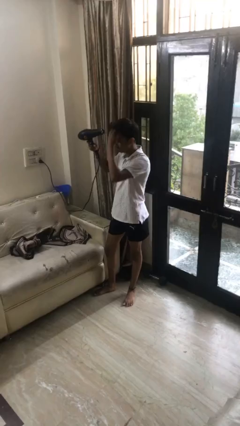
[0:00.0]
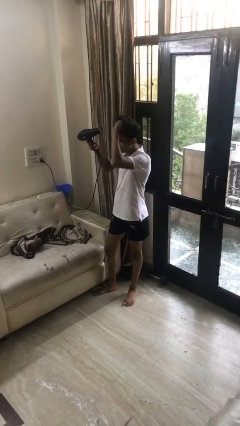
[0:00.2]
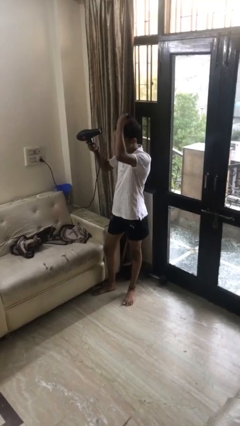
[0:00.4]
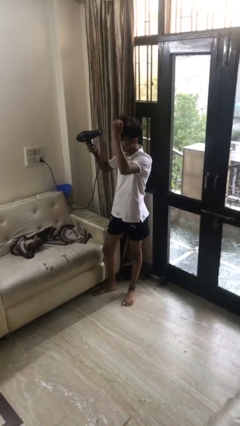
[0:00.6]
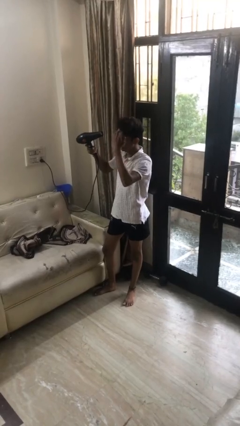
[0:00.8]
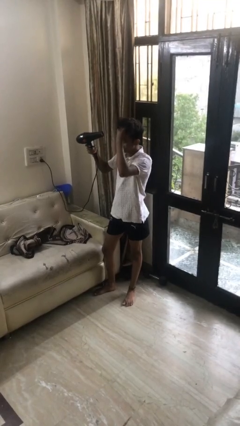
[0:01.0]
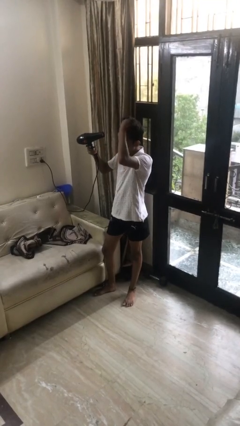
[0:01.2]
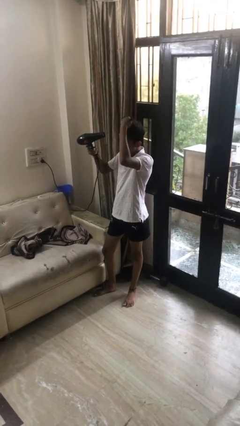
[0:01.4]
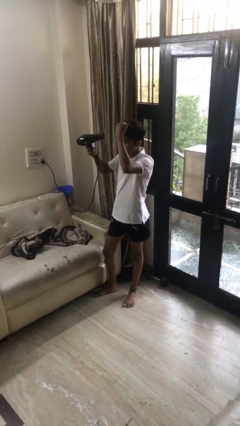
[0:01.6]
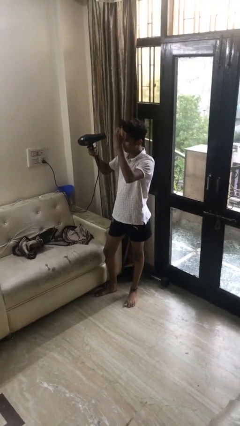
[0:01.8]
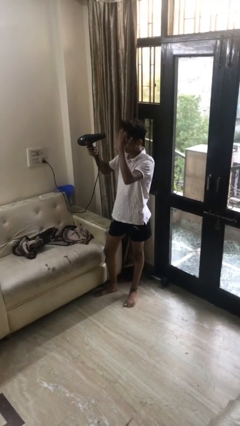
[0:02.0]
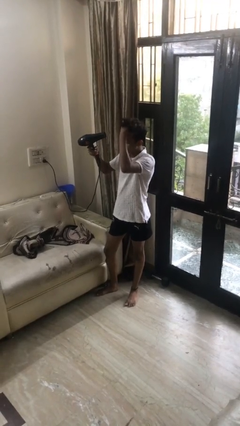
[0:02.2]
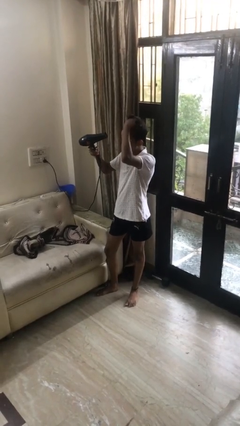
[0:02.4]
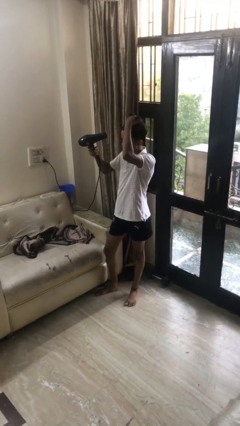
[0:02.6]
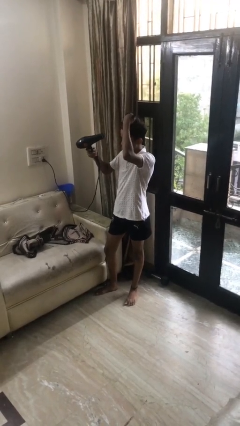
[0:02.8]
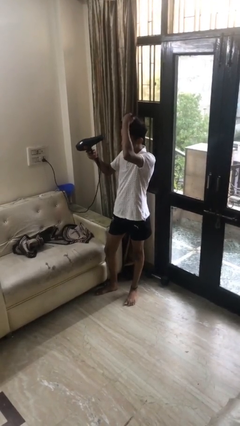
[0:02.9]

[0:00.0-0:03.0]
person dries hair with hairdryer

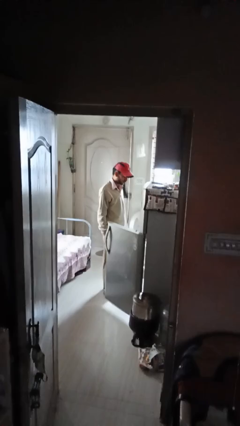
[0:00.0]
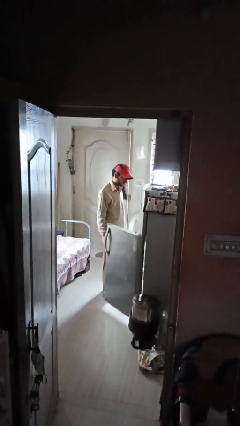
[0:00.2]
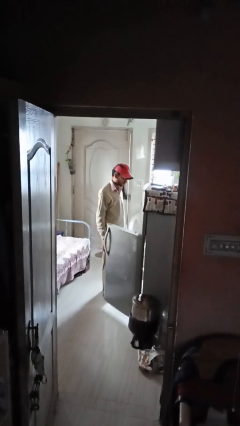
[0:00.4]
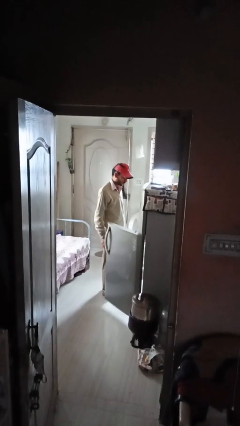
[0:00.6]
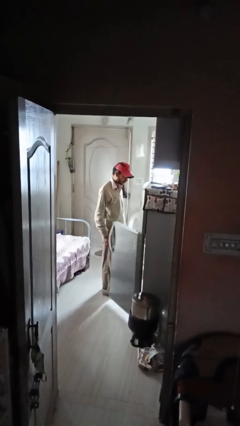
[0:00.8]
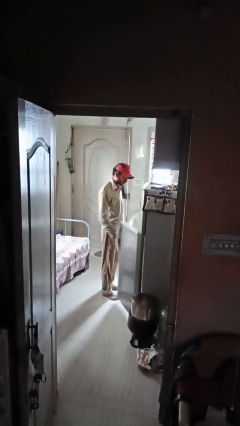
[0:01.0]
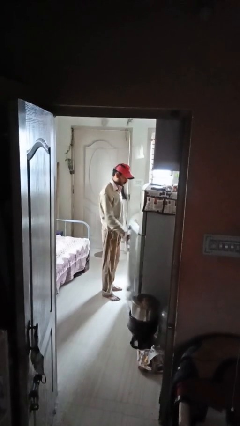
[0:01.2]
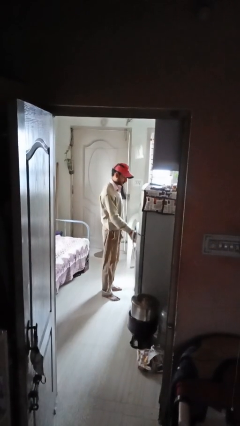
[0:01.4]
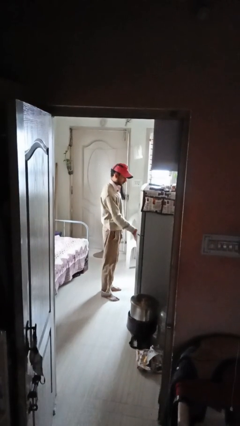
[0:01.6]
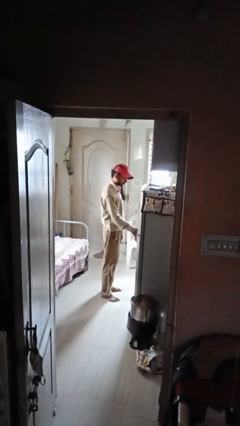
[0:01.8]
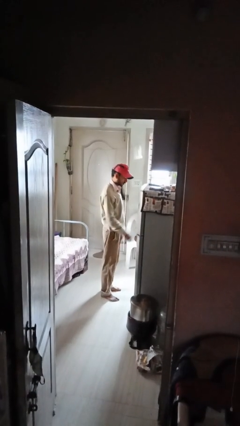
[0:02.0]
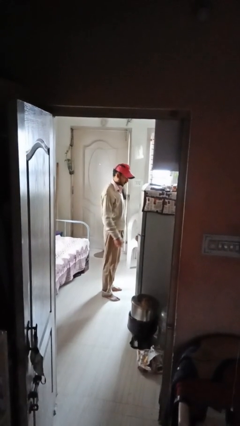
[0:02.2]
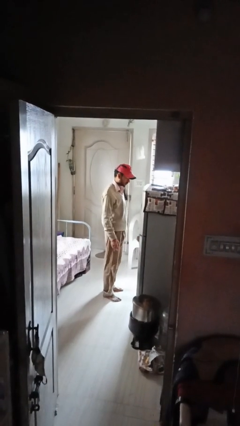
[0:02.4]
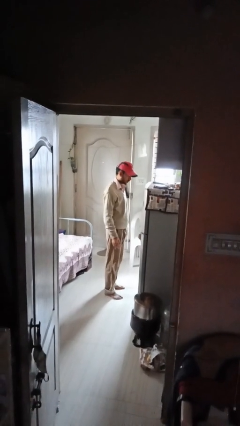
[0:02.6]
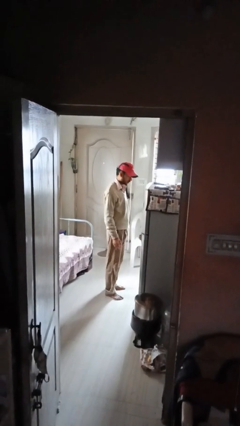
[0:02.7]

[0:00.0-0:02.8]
person closes refrigerator

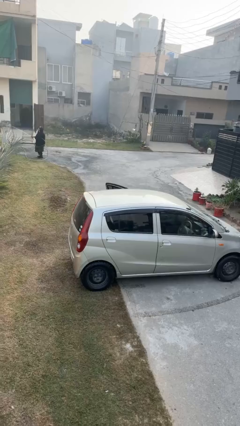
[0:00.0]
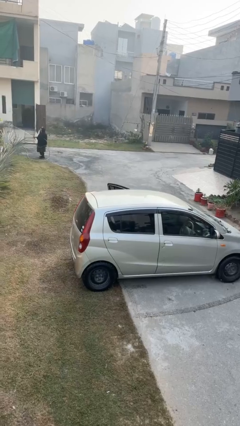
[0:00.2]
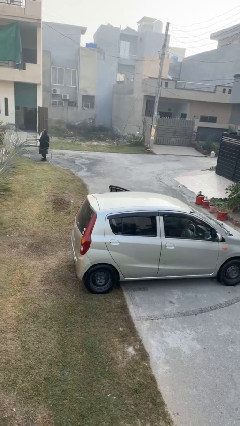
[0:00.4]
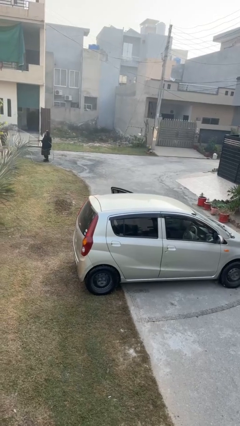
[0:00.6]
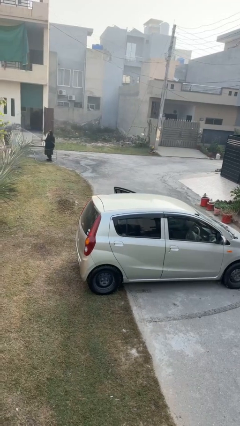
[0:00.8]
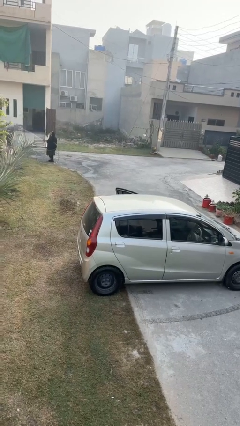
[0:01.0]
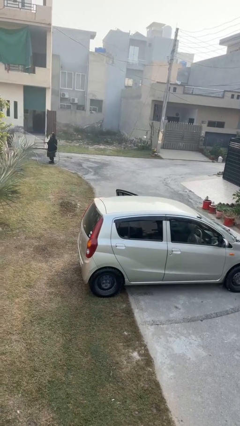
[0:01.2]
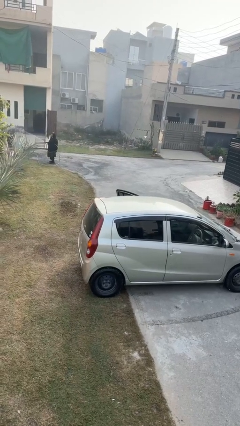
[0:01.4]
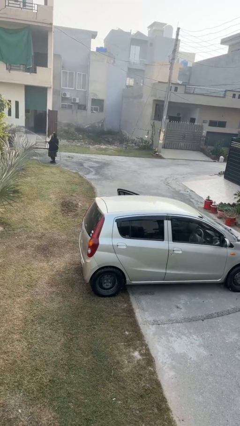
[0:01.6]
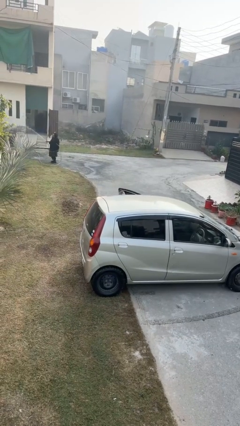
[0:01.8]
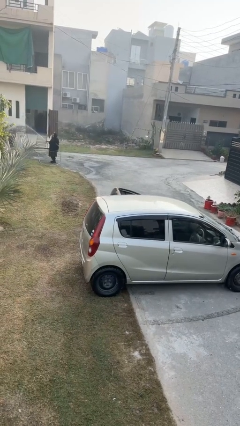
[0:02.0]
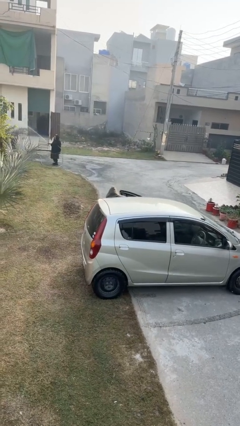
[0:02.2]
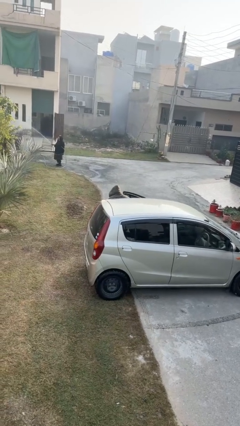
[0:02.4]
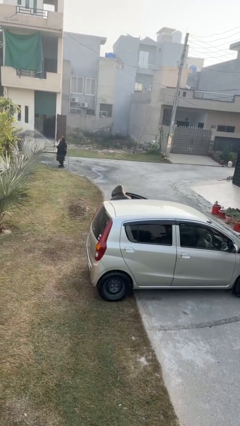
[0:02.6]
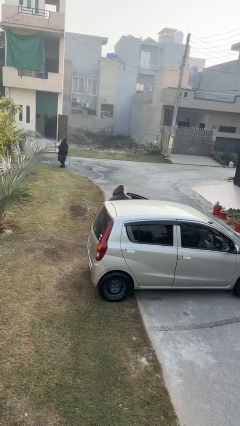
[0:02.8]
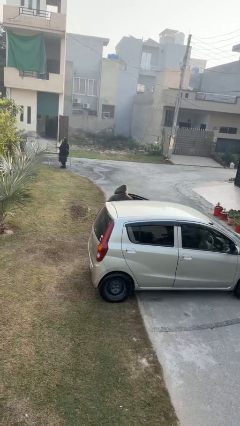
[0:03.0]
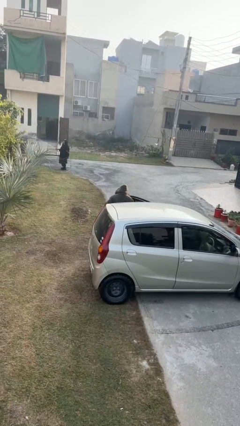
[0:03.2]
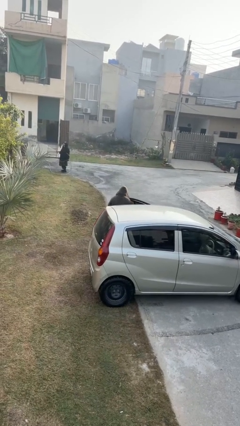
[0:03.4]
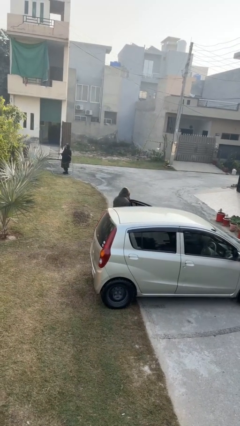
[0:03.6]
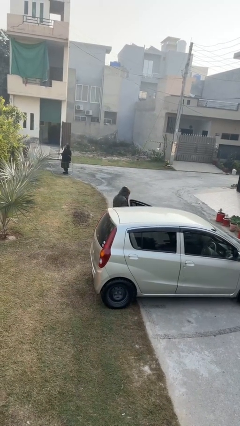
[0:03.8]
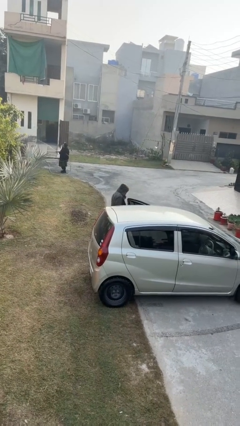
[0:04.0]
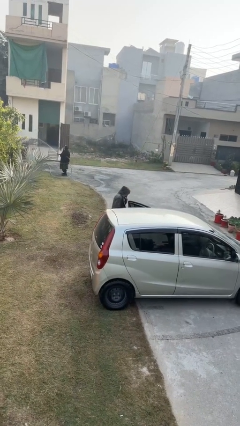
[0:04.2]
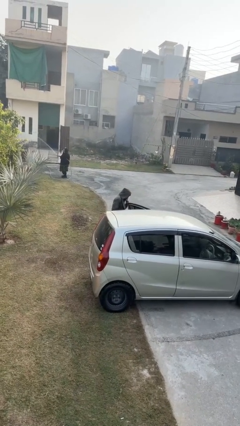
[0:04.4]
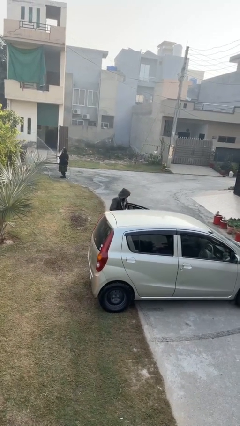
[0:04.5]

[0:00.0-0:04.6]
person exits car

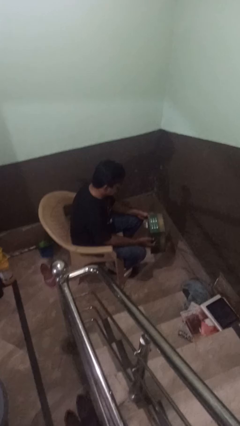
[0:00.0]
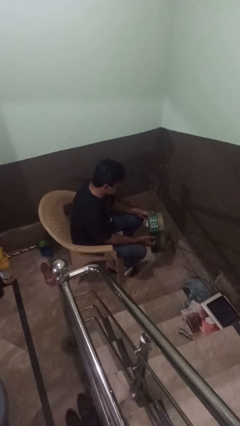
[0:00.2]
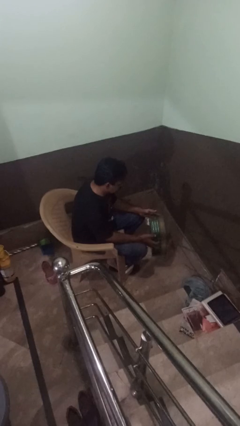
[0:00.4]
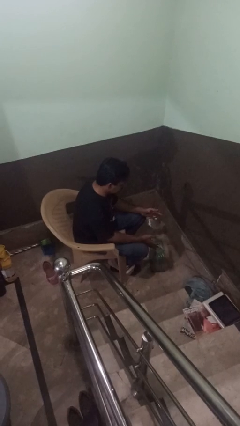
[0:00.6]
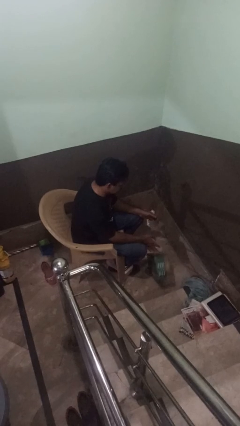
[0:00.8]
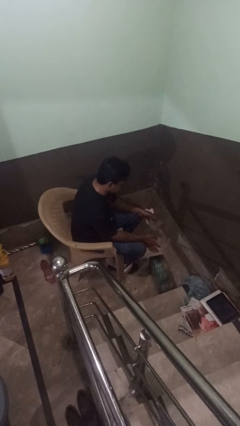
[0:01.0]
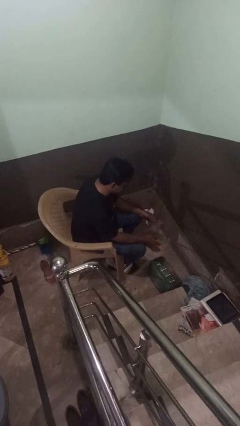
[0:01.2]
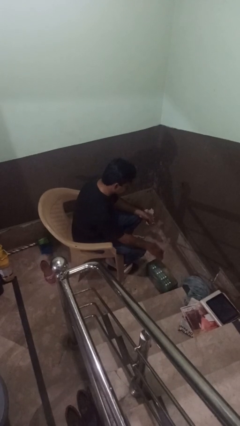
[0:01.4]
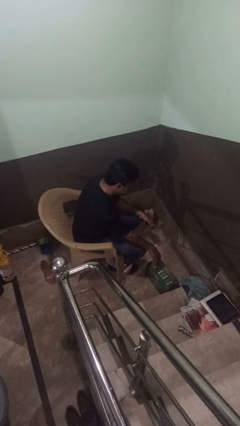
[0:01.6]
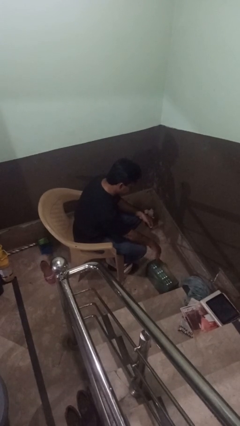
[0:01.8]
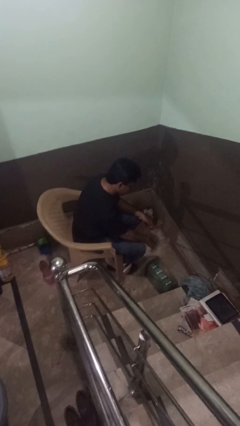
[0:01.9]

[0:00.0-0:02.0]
person drops object

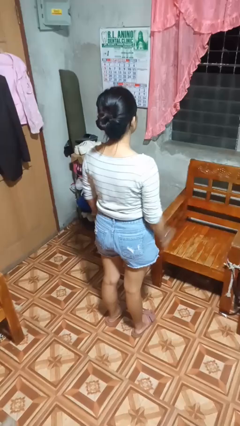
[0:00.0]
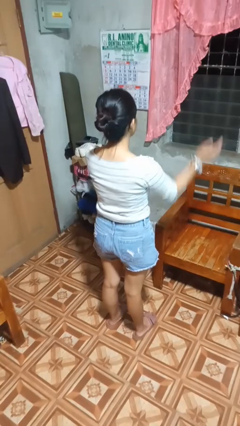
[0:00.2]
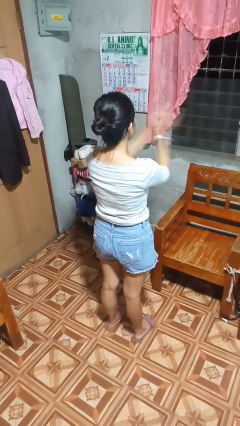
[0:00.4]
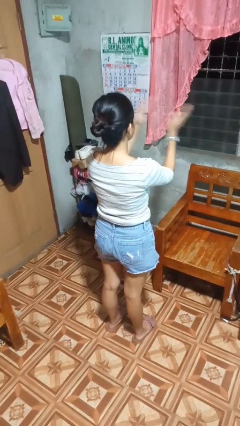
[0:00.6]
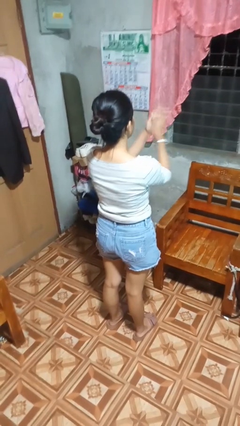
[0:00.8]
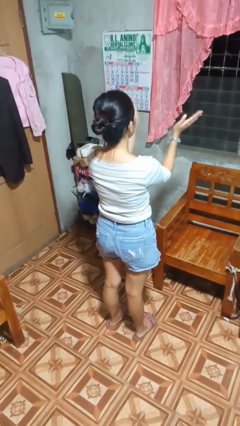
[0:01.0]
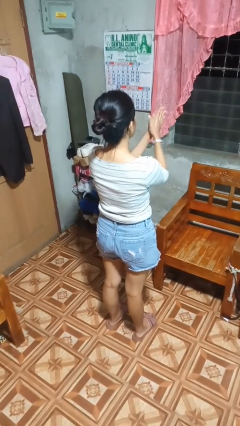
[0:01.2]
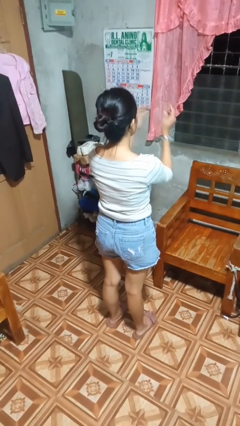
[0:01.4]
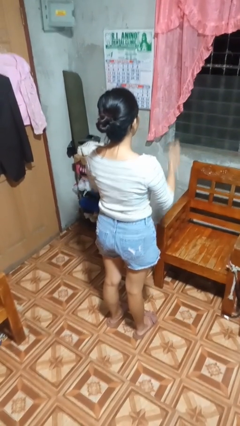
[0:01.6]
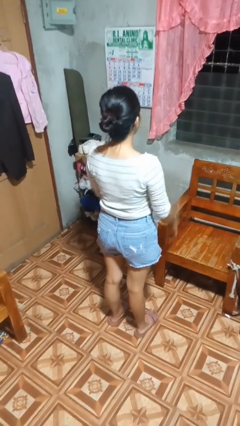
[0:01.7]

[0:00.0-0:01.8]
person claps hands

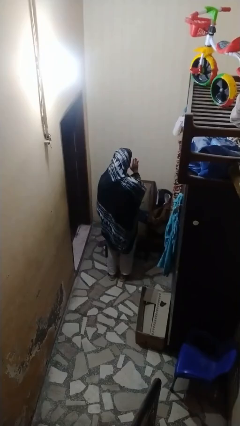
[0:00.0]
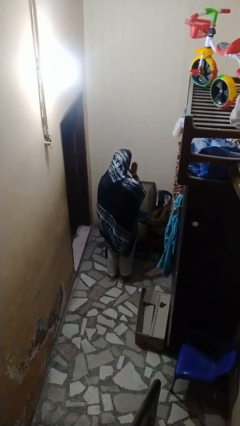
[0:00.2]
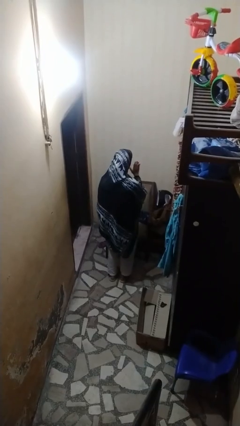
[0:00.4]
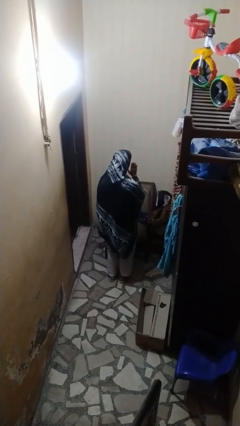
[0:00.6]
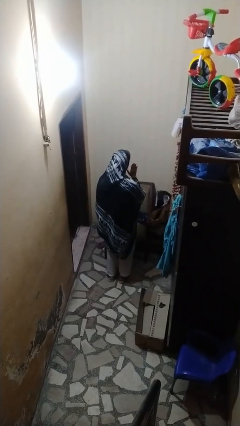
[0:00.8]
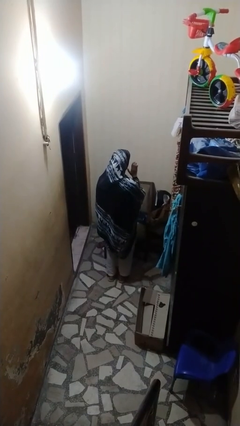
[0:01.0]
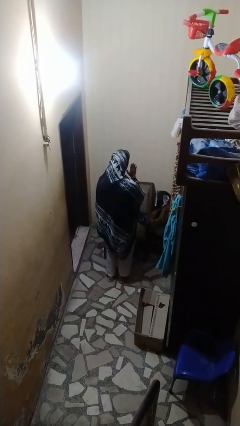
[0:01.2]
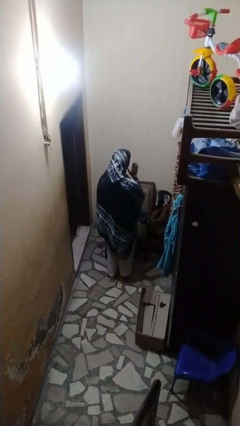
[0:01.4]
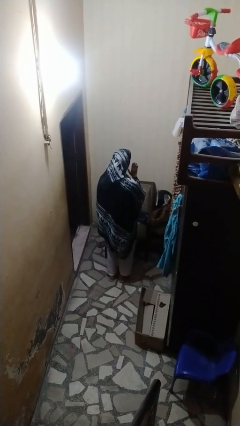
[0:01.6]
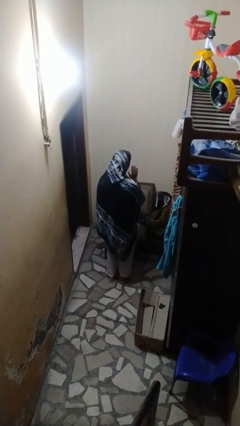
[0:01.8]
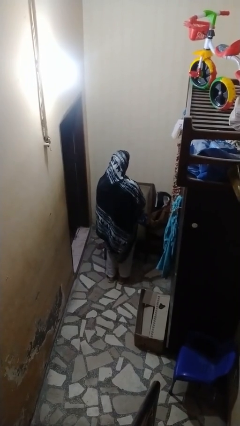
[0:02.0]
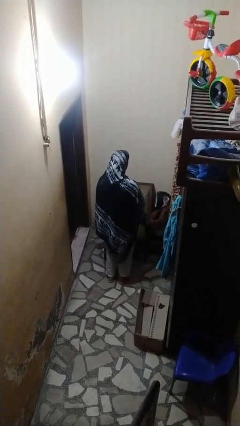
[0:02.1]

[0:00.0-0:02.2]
person gestures stop

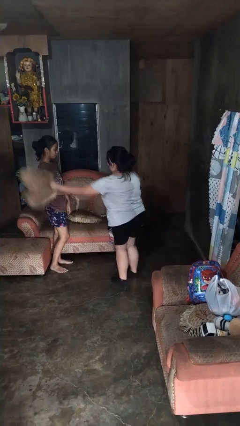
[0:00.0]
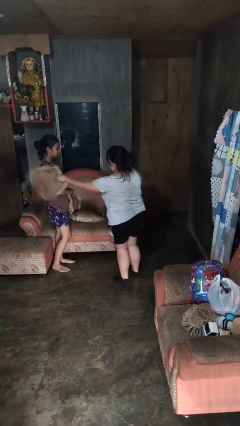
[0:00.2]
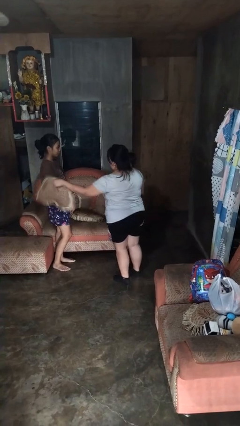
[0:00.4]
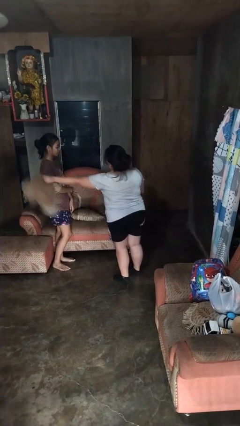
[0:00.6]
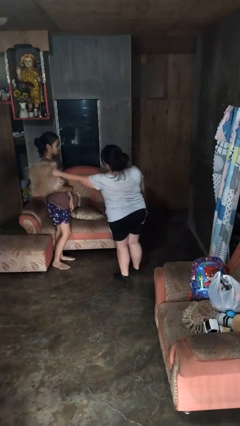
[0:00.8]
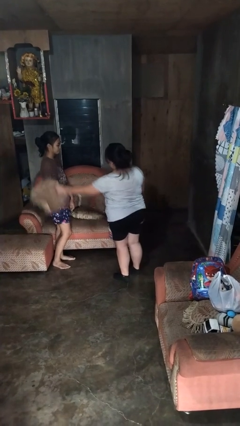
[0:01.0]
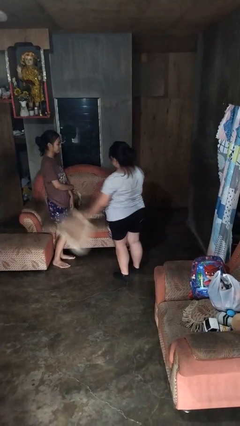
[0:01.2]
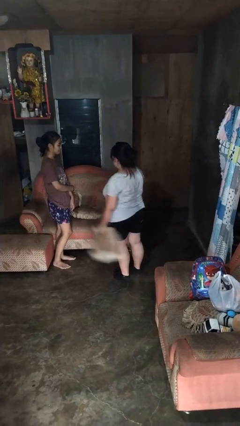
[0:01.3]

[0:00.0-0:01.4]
person hits person with pillow
